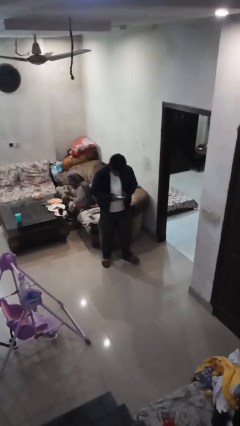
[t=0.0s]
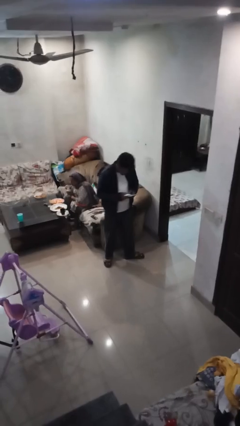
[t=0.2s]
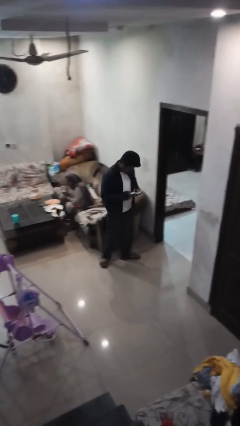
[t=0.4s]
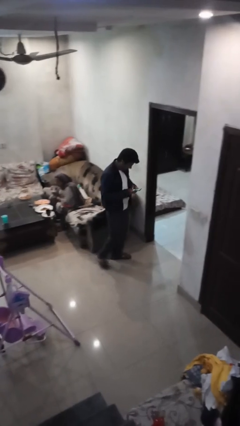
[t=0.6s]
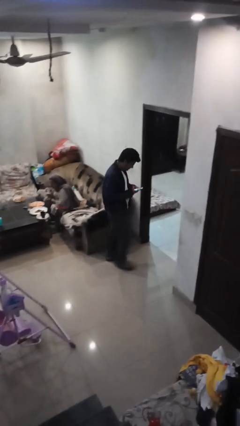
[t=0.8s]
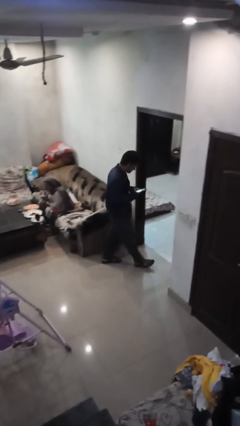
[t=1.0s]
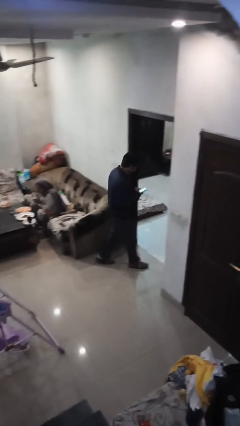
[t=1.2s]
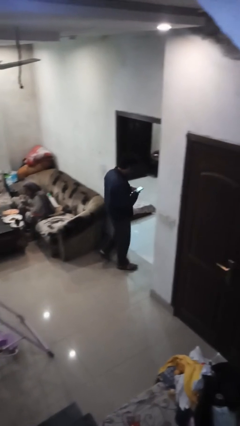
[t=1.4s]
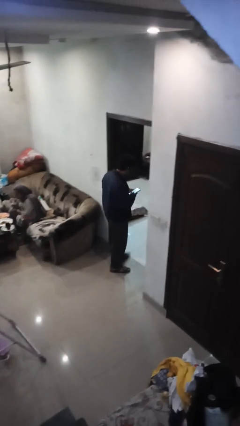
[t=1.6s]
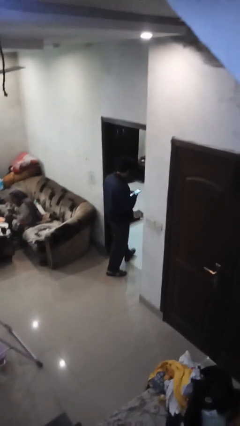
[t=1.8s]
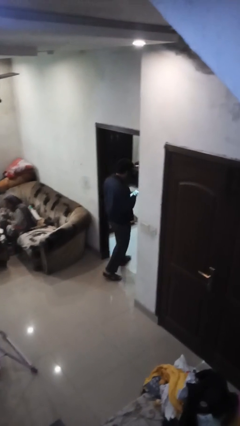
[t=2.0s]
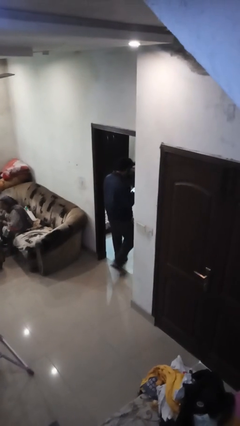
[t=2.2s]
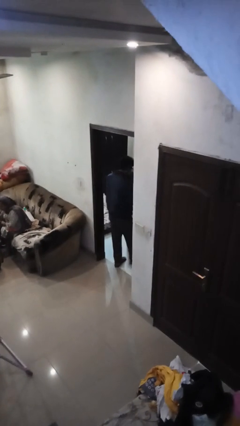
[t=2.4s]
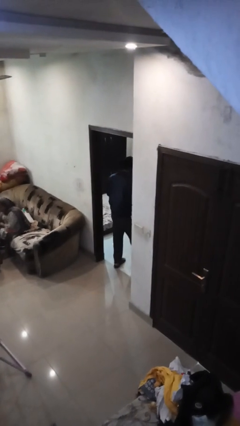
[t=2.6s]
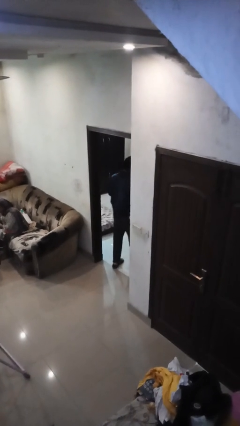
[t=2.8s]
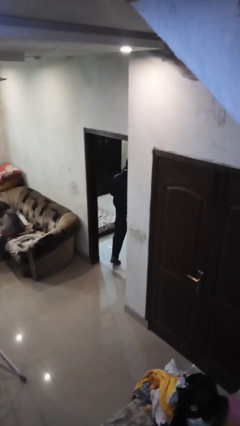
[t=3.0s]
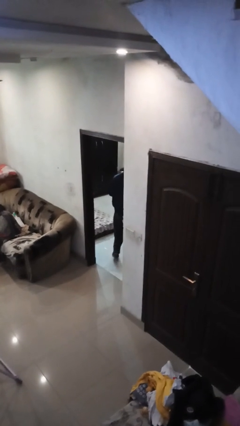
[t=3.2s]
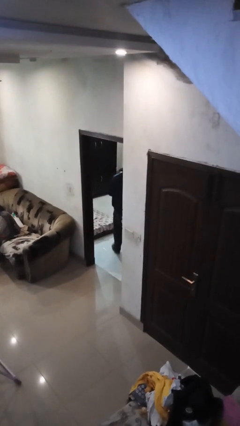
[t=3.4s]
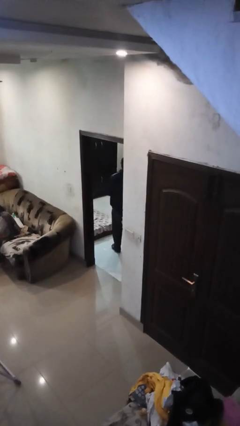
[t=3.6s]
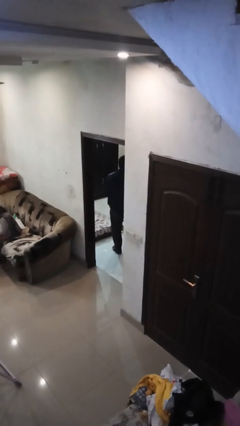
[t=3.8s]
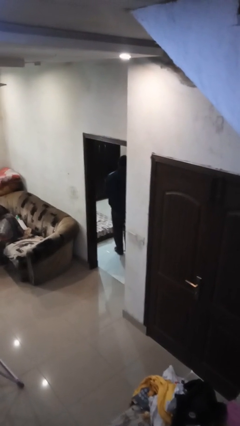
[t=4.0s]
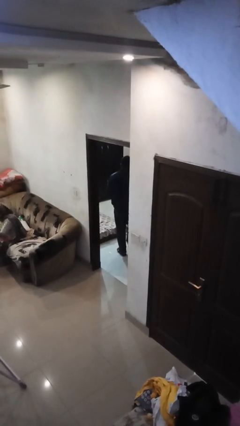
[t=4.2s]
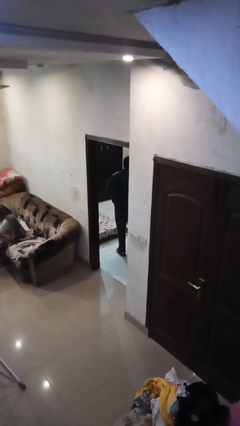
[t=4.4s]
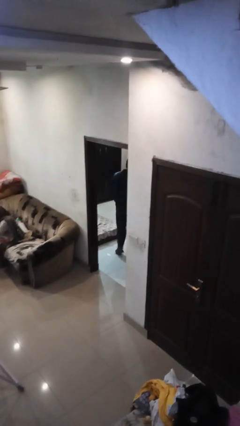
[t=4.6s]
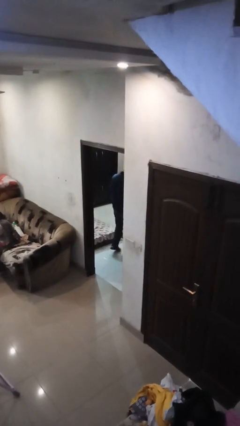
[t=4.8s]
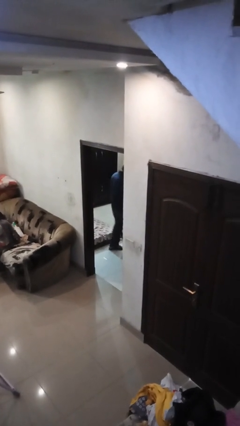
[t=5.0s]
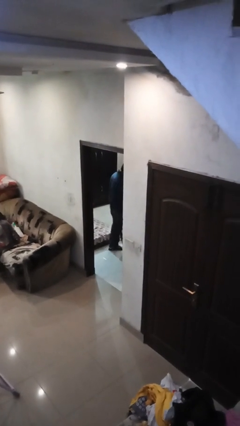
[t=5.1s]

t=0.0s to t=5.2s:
person exits scene through structure

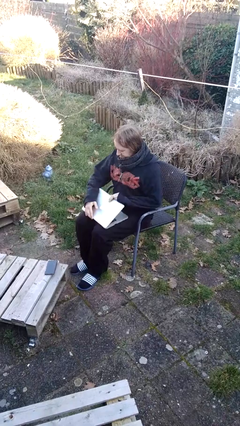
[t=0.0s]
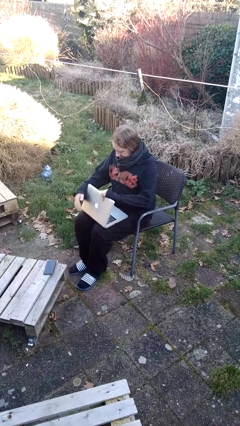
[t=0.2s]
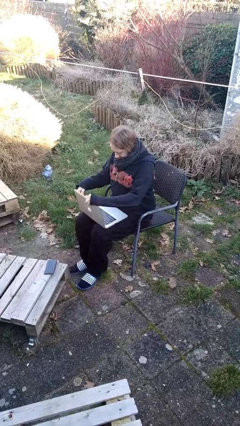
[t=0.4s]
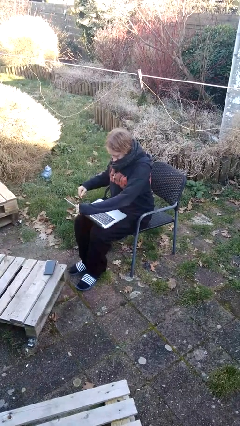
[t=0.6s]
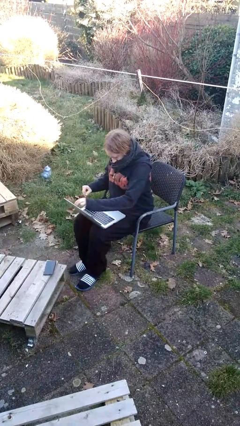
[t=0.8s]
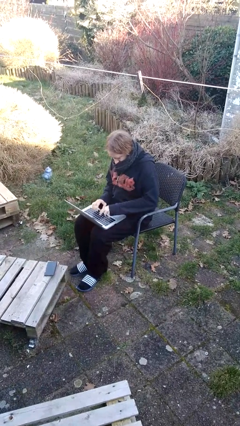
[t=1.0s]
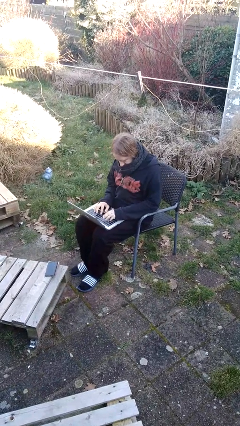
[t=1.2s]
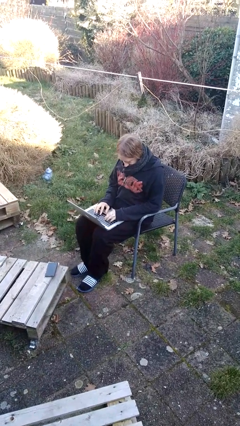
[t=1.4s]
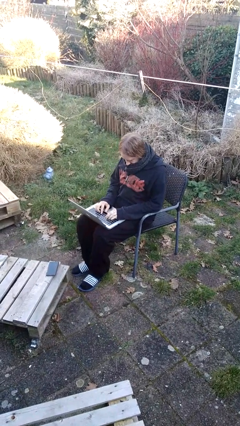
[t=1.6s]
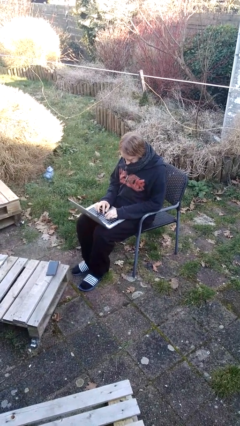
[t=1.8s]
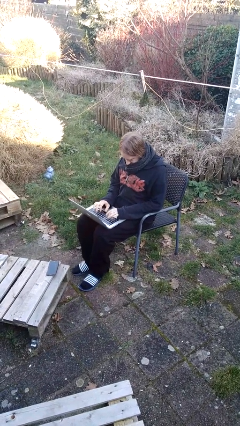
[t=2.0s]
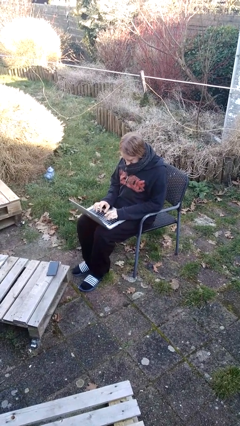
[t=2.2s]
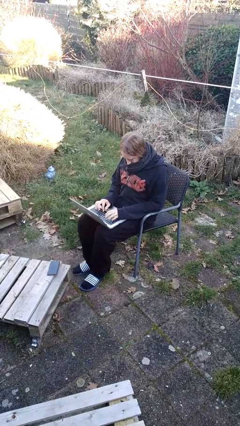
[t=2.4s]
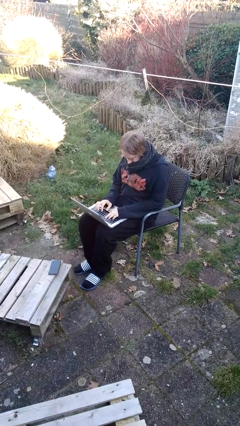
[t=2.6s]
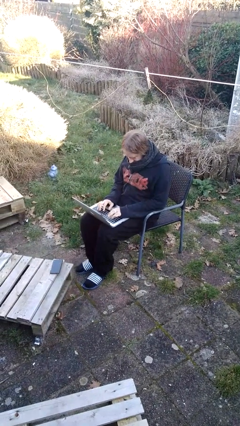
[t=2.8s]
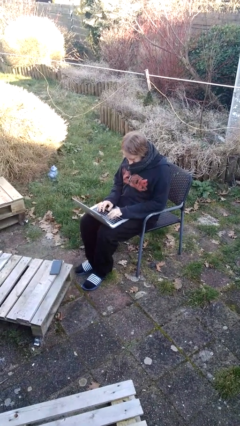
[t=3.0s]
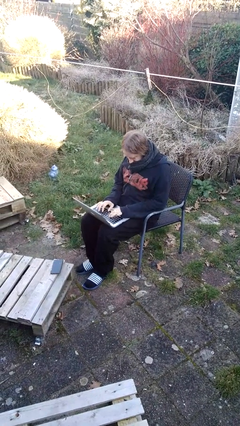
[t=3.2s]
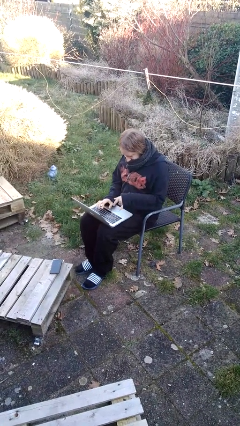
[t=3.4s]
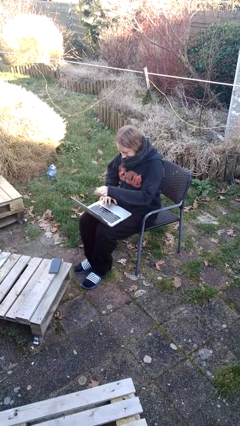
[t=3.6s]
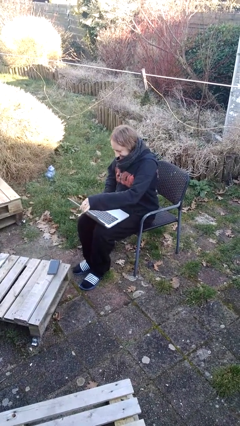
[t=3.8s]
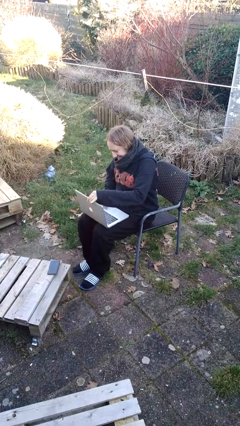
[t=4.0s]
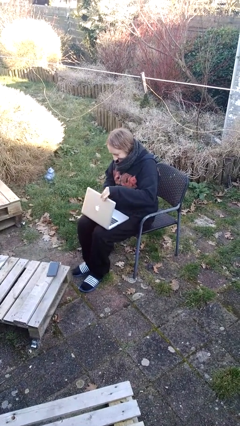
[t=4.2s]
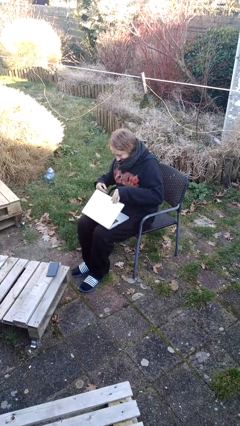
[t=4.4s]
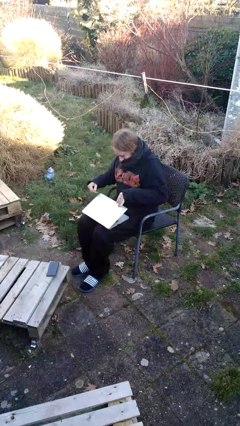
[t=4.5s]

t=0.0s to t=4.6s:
person interacts with laptop

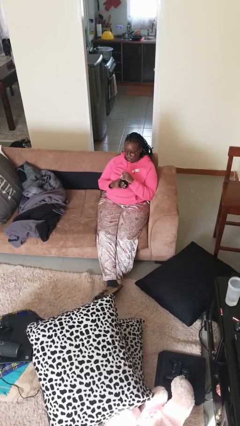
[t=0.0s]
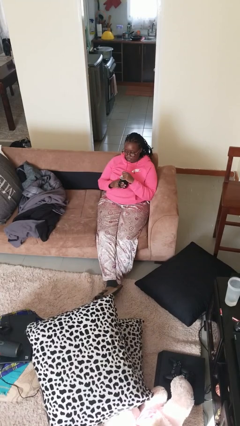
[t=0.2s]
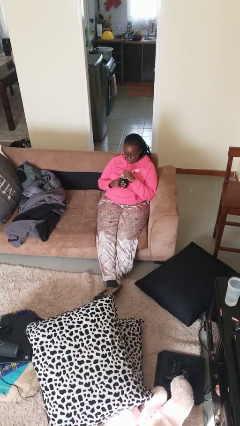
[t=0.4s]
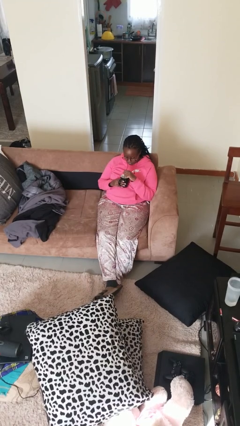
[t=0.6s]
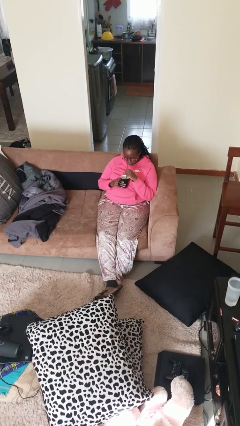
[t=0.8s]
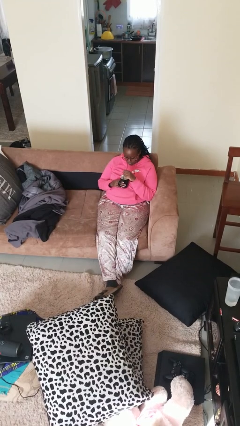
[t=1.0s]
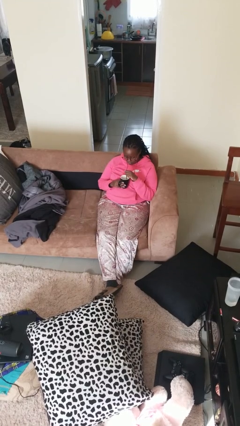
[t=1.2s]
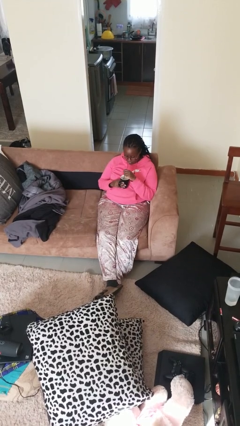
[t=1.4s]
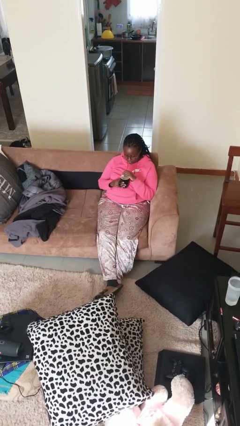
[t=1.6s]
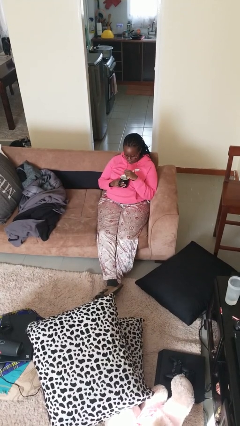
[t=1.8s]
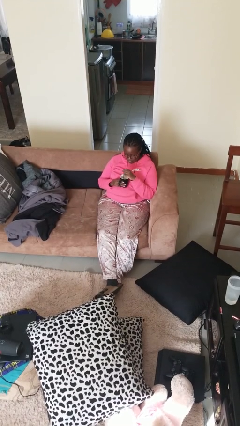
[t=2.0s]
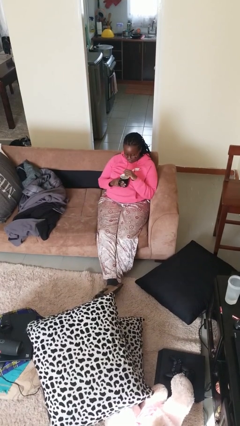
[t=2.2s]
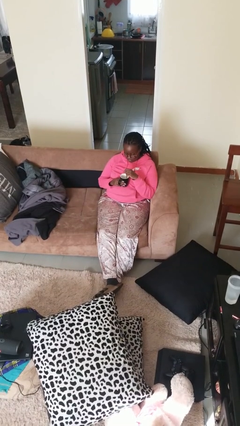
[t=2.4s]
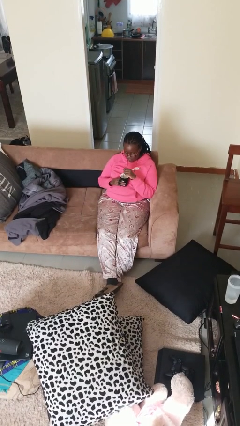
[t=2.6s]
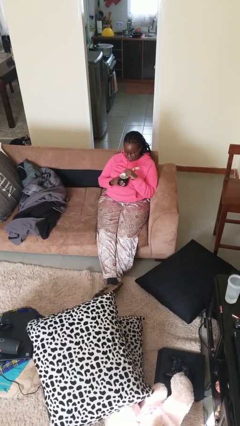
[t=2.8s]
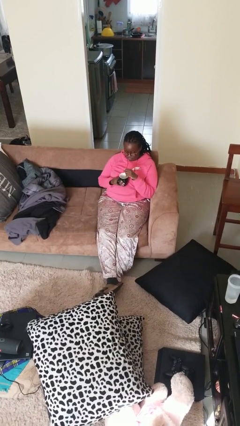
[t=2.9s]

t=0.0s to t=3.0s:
person stirs mug

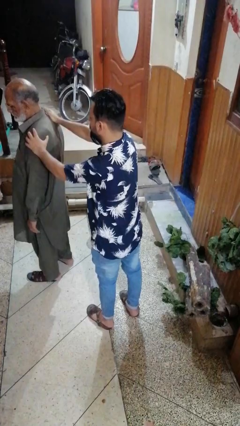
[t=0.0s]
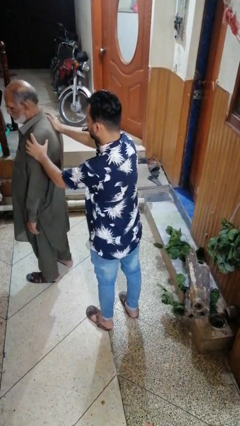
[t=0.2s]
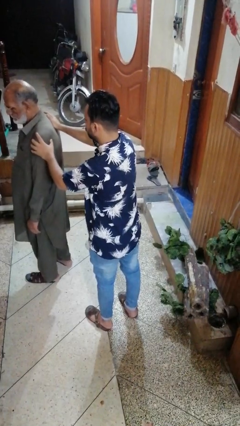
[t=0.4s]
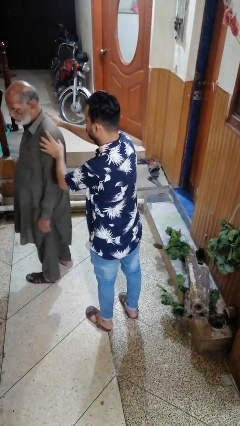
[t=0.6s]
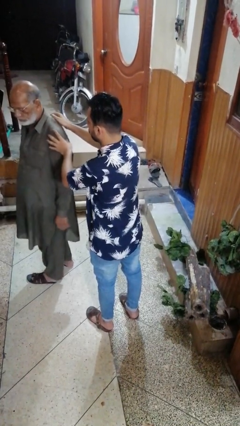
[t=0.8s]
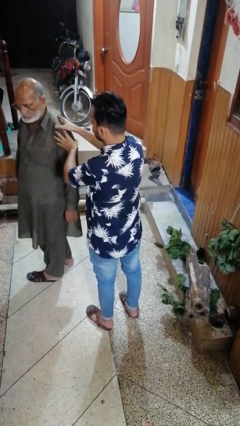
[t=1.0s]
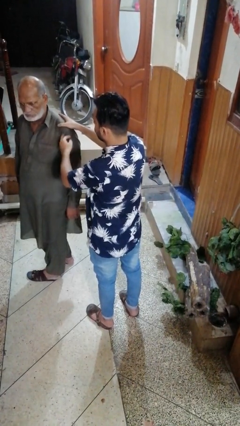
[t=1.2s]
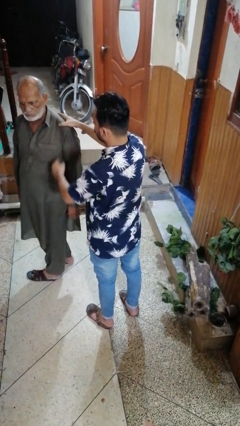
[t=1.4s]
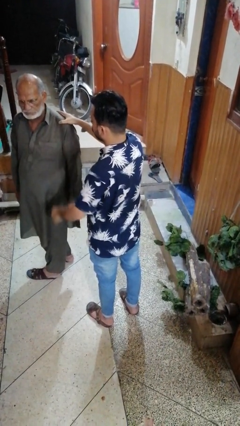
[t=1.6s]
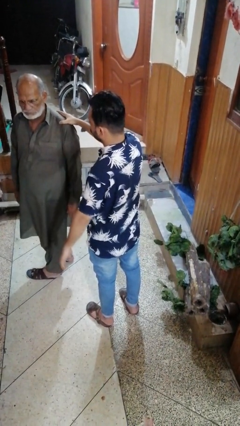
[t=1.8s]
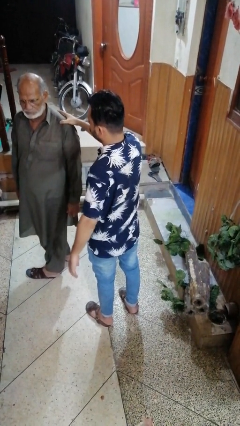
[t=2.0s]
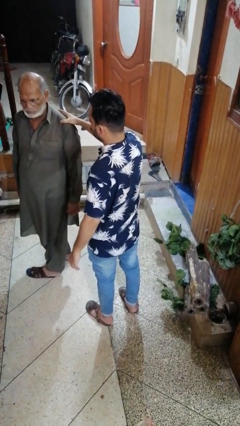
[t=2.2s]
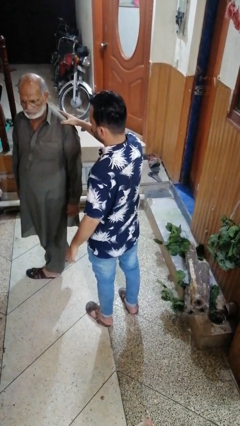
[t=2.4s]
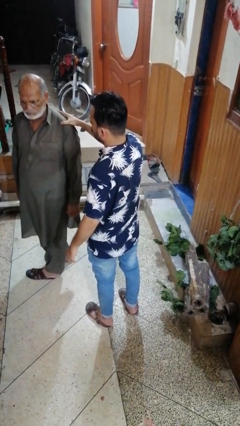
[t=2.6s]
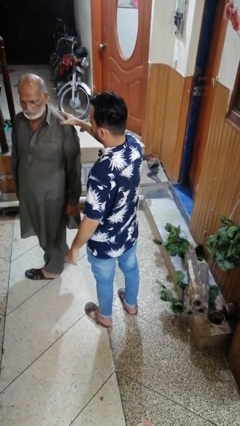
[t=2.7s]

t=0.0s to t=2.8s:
person spins person around

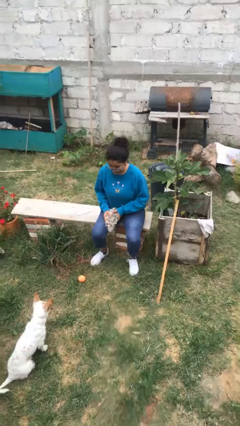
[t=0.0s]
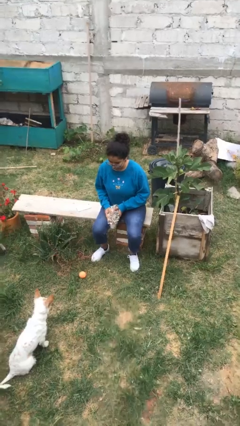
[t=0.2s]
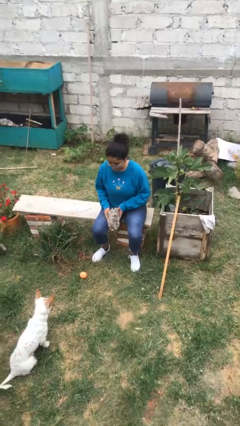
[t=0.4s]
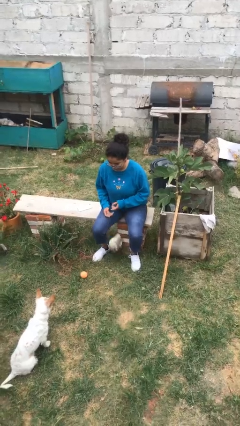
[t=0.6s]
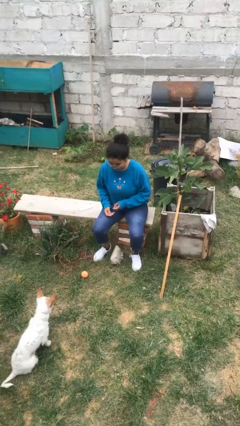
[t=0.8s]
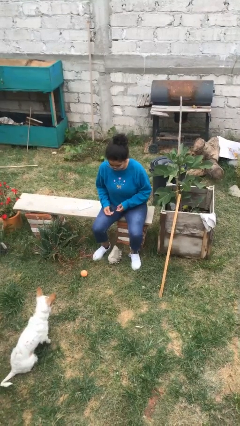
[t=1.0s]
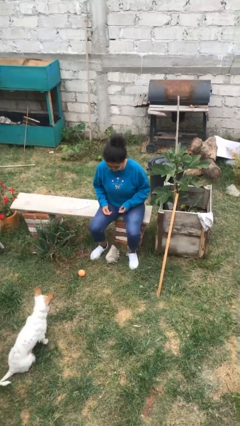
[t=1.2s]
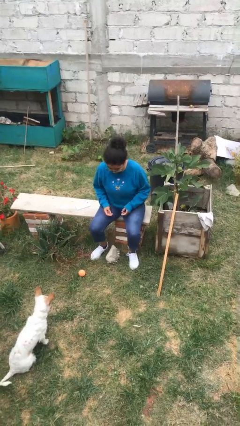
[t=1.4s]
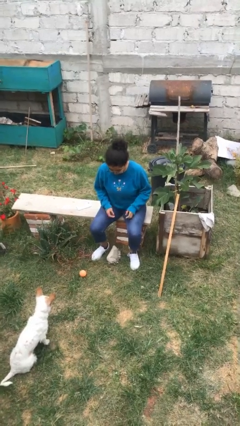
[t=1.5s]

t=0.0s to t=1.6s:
person drops object
